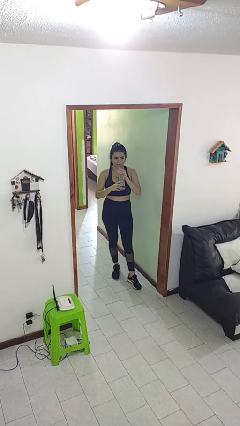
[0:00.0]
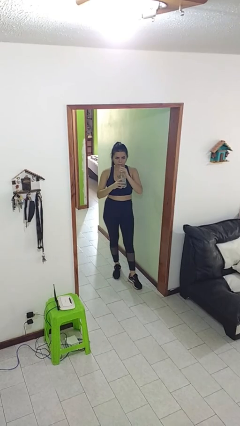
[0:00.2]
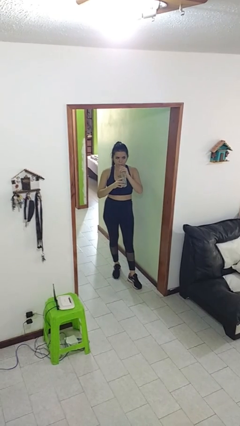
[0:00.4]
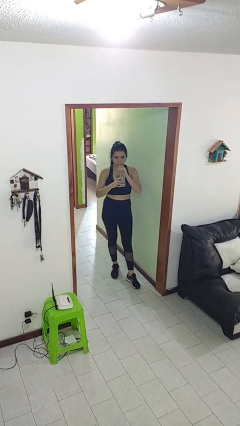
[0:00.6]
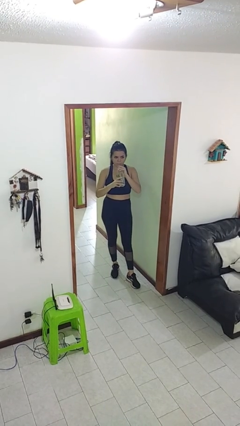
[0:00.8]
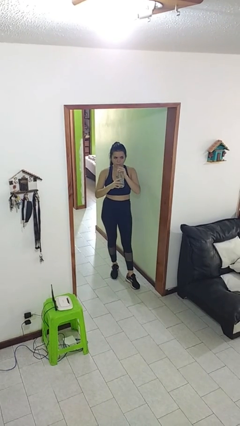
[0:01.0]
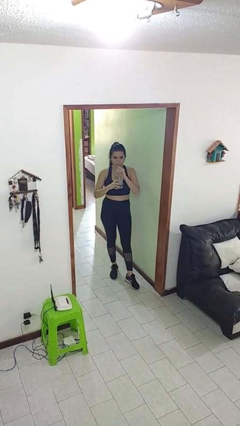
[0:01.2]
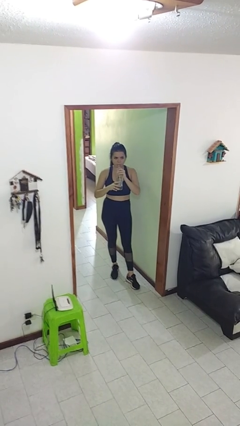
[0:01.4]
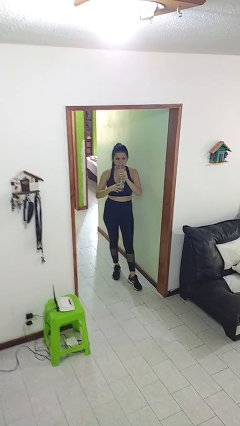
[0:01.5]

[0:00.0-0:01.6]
person drinks from straw

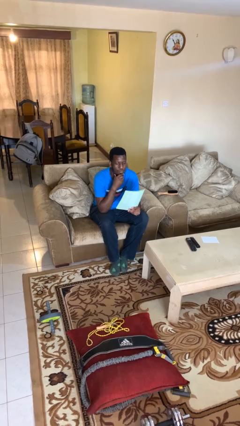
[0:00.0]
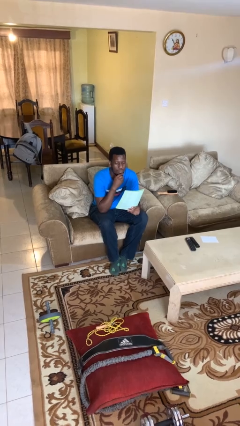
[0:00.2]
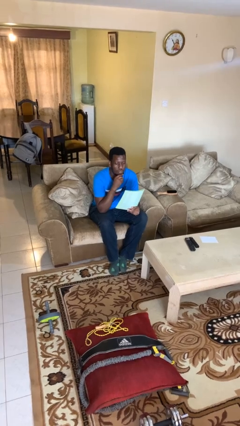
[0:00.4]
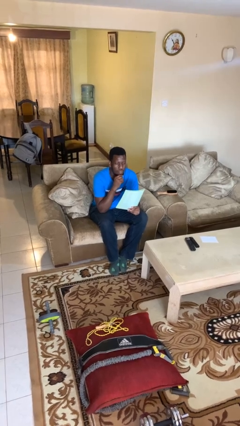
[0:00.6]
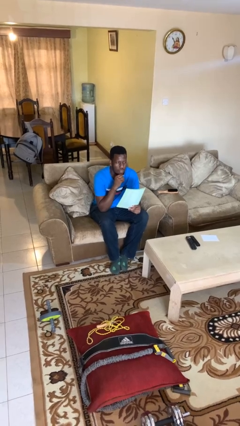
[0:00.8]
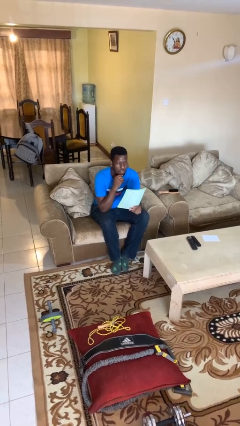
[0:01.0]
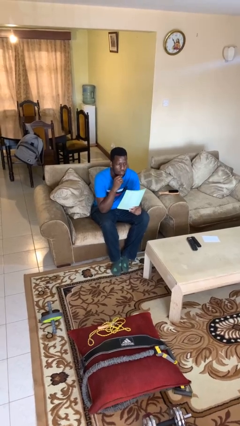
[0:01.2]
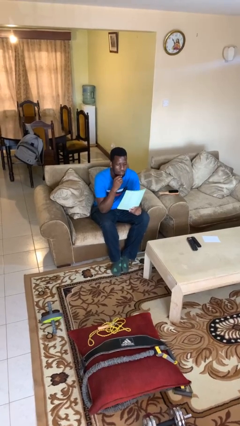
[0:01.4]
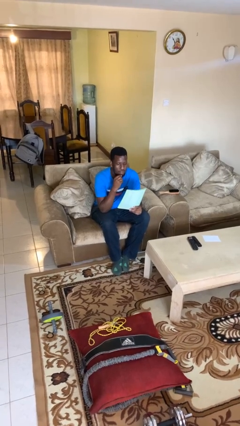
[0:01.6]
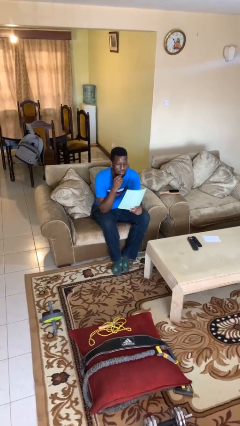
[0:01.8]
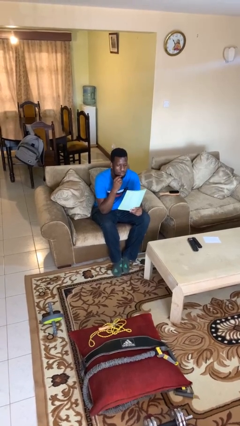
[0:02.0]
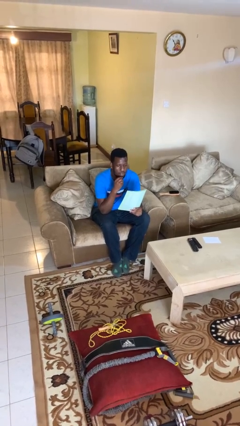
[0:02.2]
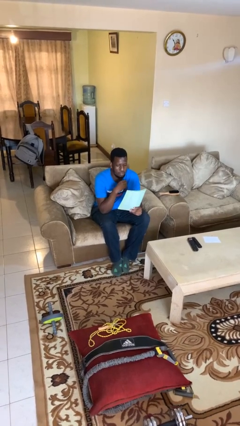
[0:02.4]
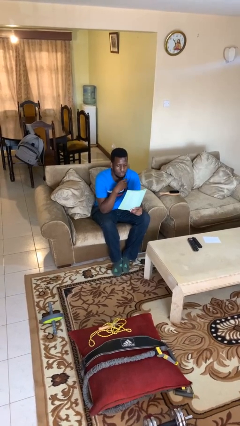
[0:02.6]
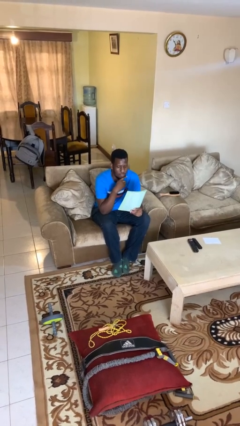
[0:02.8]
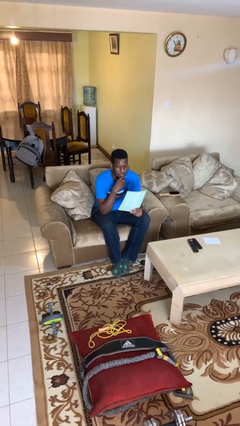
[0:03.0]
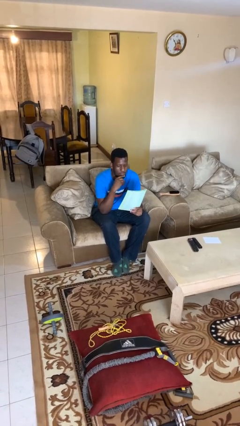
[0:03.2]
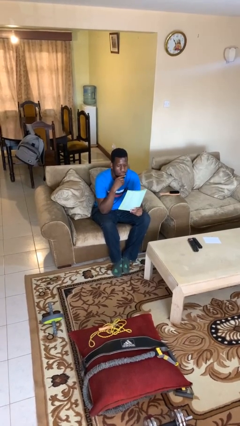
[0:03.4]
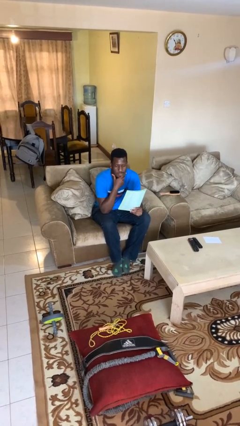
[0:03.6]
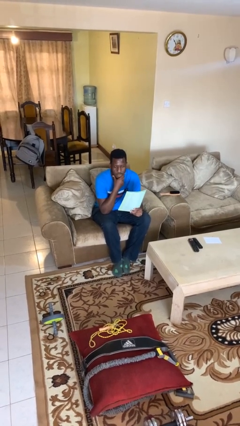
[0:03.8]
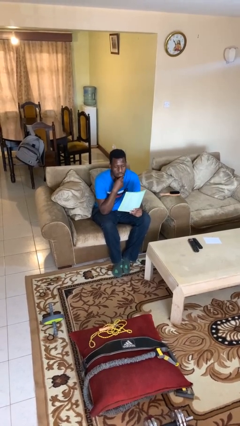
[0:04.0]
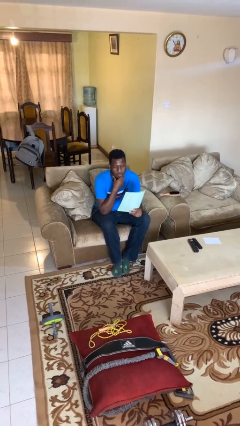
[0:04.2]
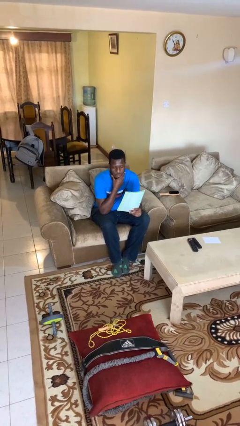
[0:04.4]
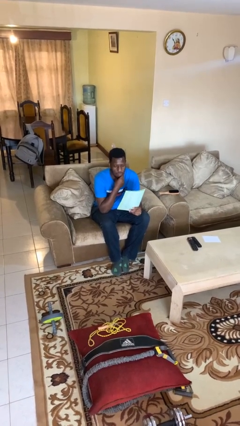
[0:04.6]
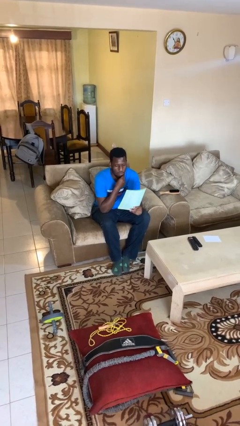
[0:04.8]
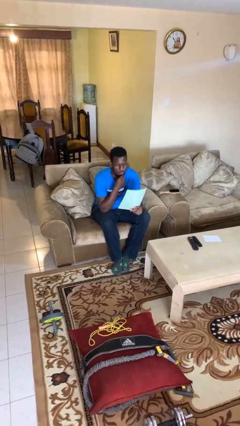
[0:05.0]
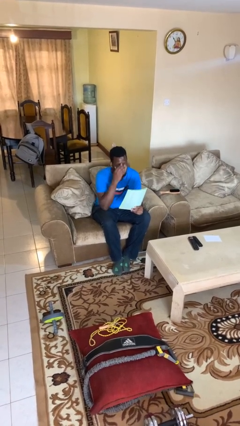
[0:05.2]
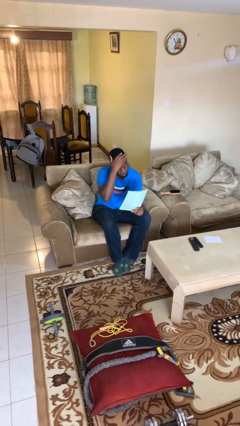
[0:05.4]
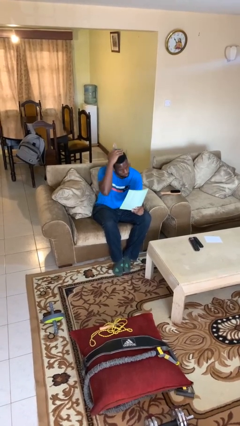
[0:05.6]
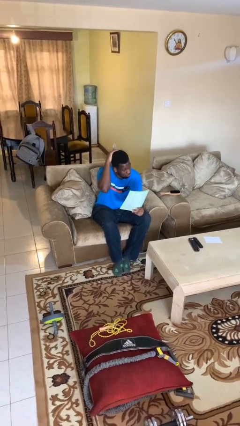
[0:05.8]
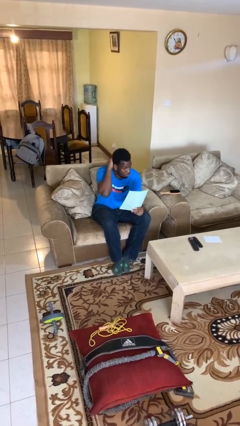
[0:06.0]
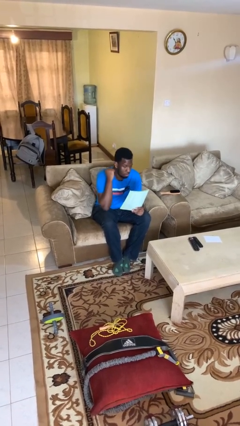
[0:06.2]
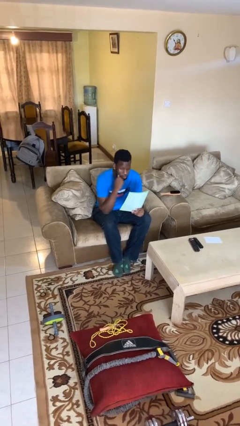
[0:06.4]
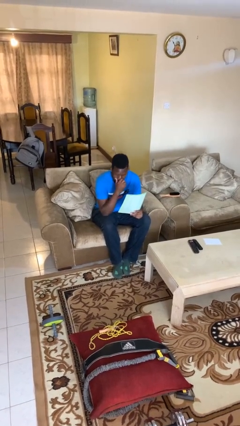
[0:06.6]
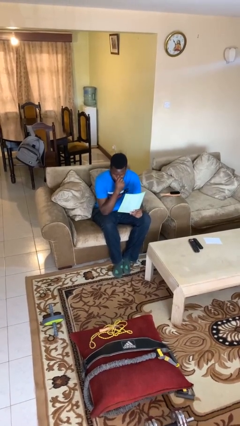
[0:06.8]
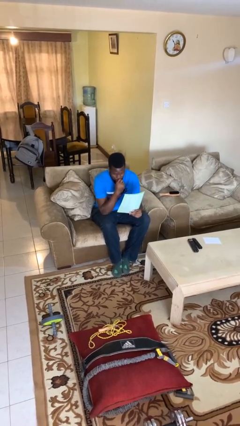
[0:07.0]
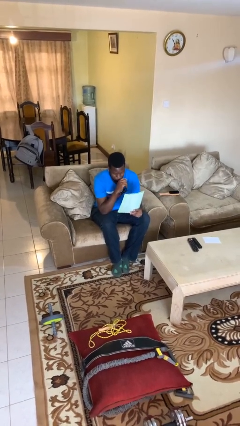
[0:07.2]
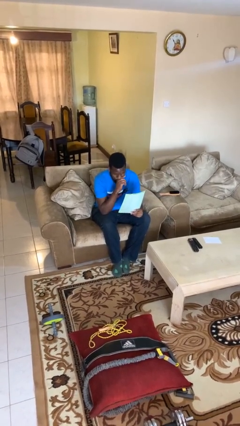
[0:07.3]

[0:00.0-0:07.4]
person reads document

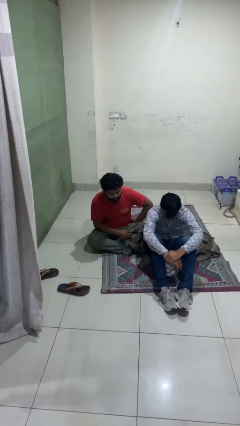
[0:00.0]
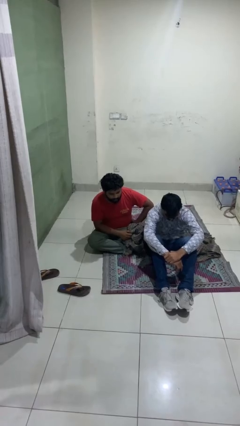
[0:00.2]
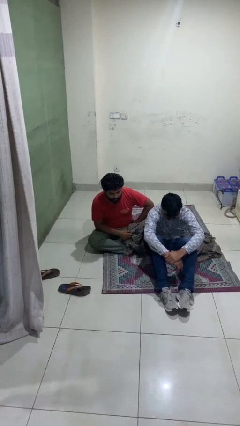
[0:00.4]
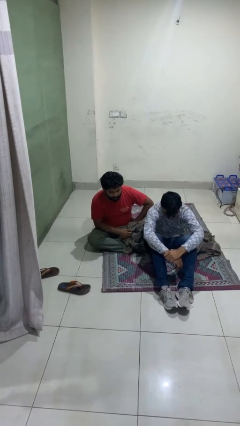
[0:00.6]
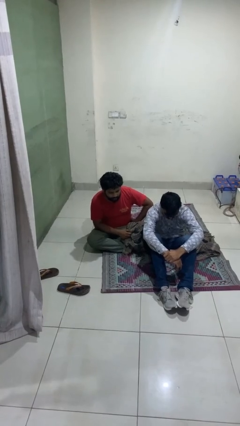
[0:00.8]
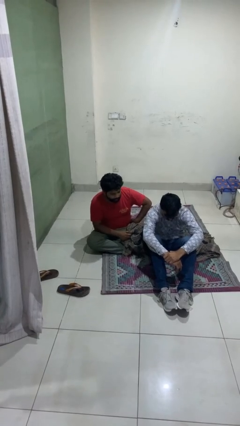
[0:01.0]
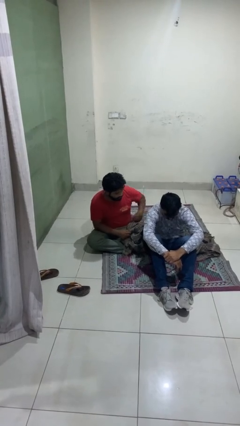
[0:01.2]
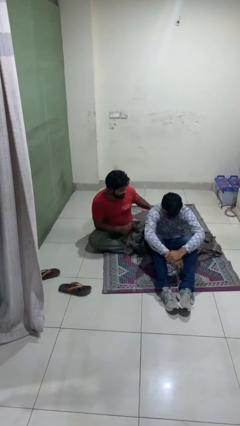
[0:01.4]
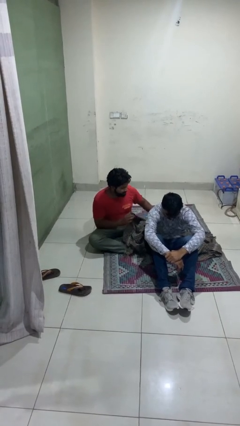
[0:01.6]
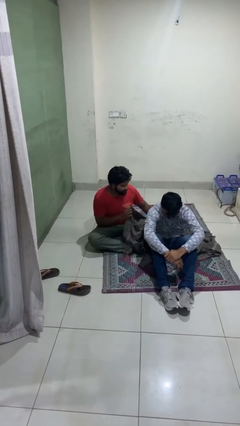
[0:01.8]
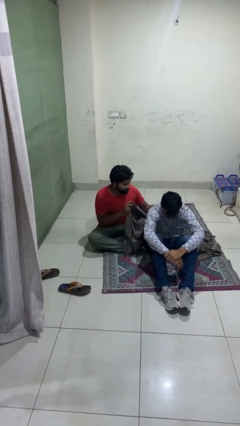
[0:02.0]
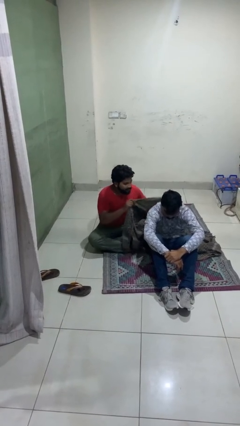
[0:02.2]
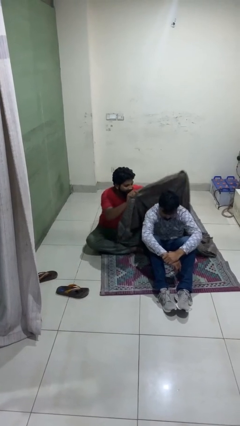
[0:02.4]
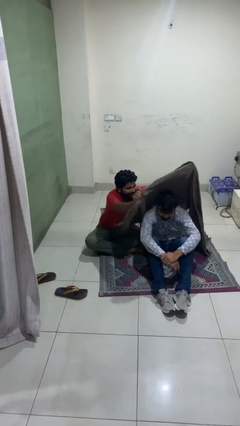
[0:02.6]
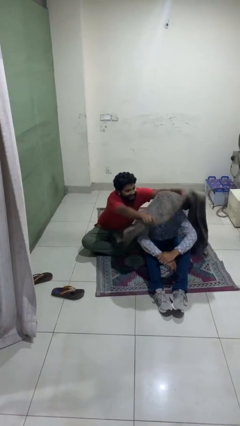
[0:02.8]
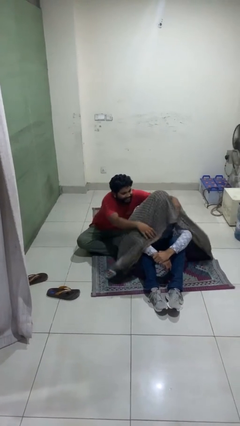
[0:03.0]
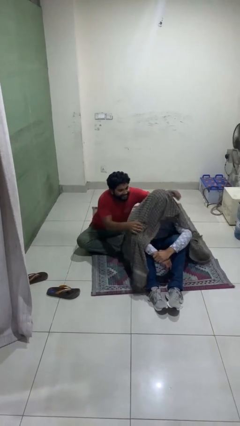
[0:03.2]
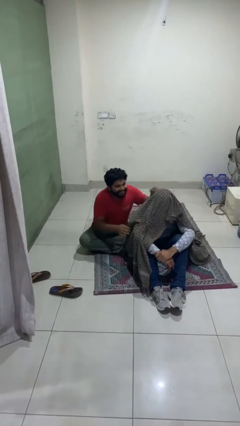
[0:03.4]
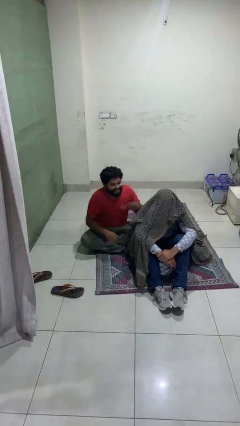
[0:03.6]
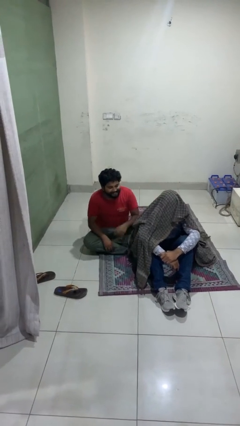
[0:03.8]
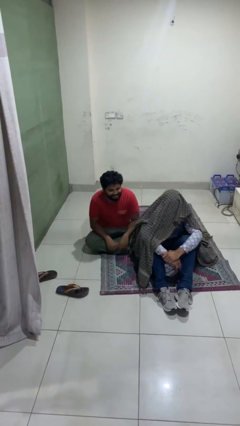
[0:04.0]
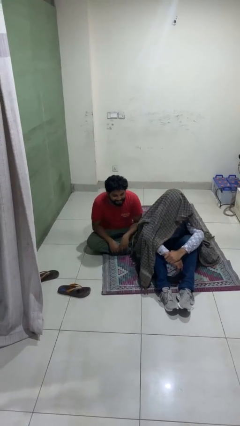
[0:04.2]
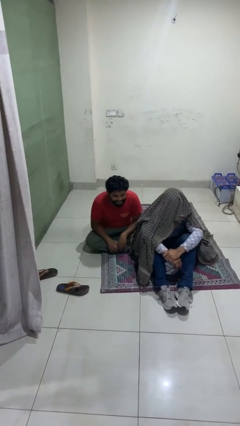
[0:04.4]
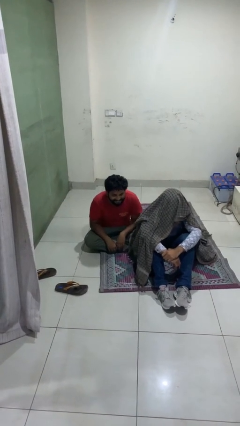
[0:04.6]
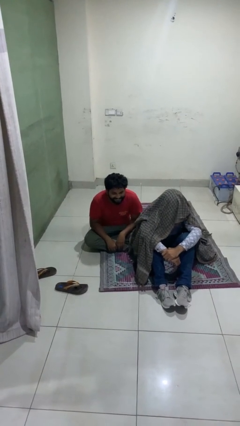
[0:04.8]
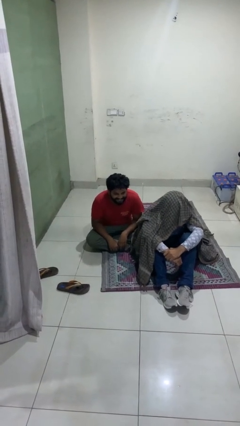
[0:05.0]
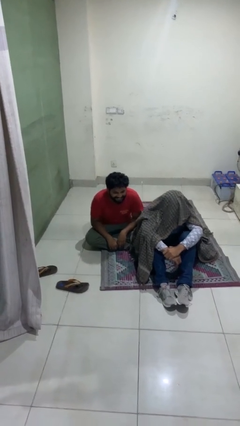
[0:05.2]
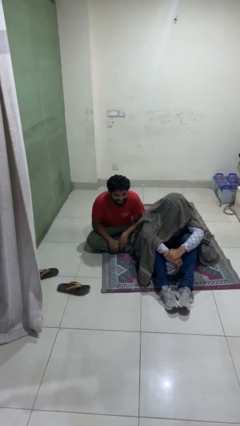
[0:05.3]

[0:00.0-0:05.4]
person covers friend with blanket

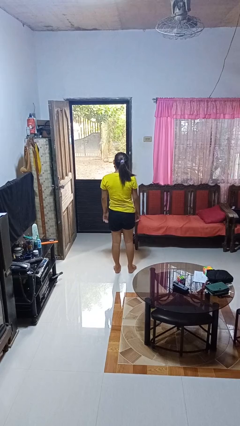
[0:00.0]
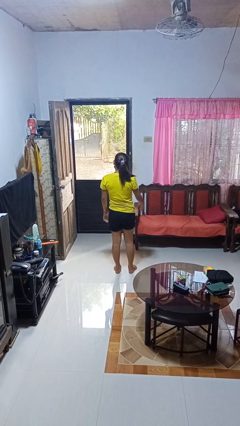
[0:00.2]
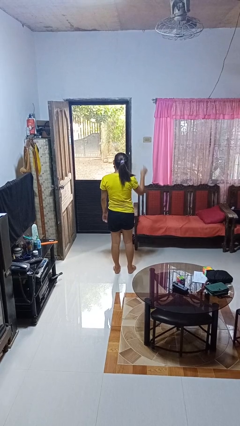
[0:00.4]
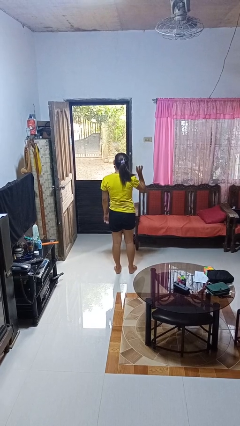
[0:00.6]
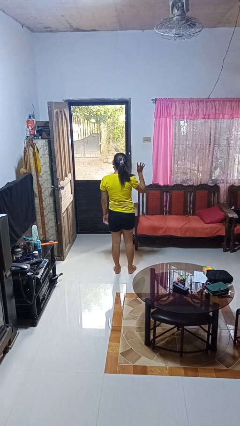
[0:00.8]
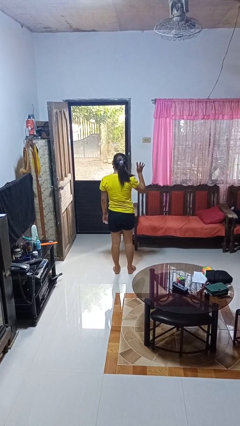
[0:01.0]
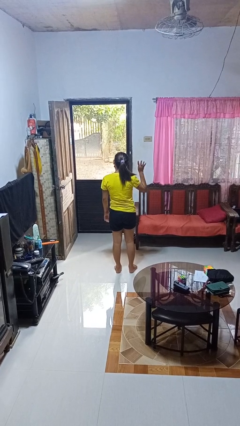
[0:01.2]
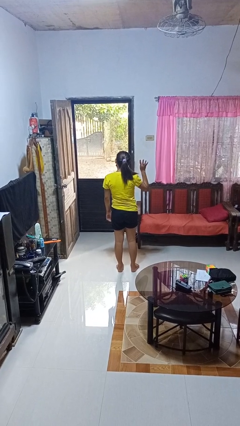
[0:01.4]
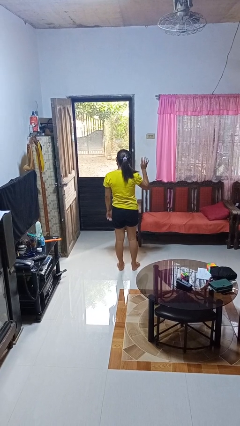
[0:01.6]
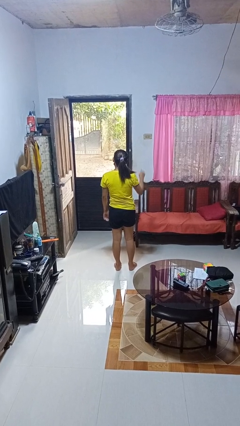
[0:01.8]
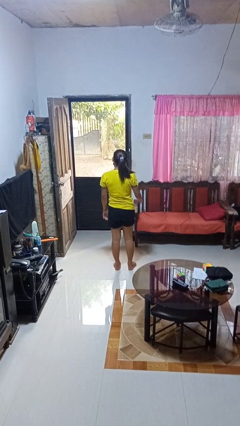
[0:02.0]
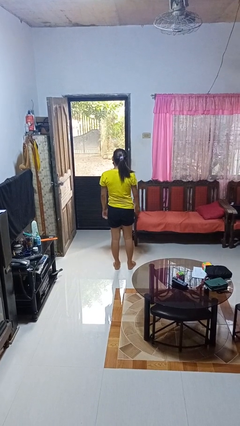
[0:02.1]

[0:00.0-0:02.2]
person gestures number four

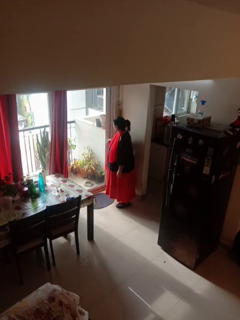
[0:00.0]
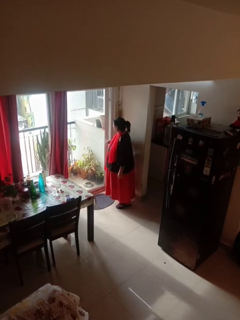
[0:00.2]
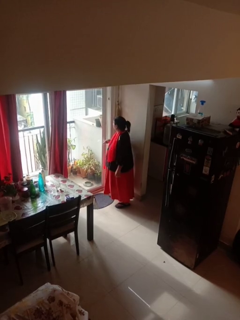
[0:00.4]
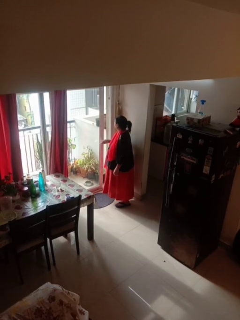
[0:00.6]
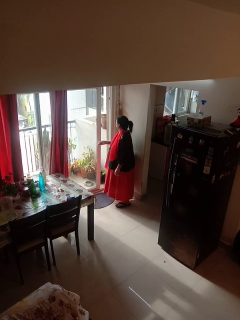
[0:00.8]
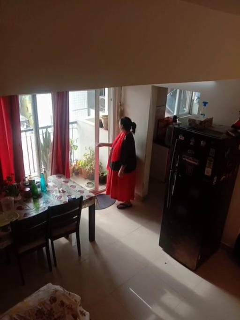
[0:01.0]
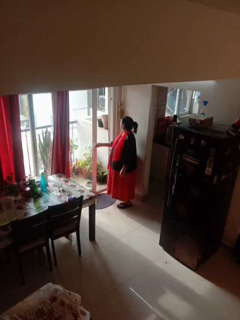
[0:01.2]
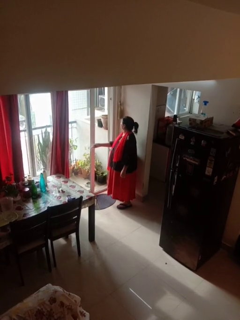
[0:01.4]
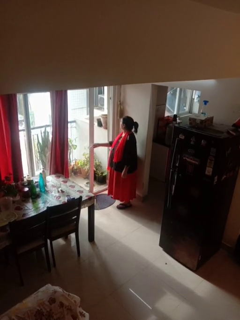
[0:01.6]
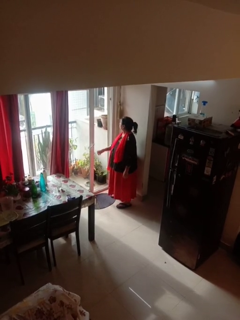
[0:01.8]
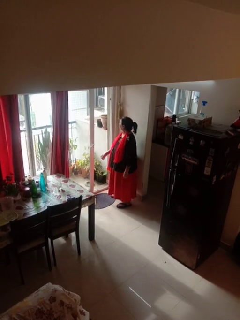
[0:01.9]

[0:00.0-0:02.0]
person opens home window
